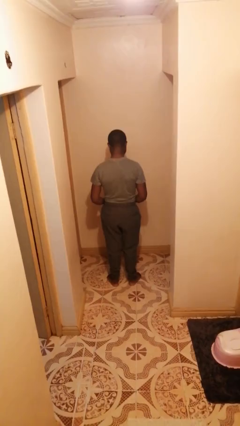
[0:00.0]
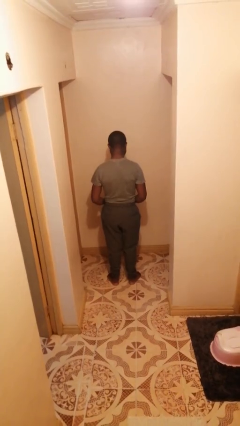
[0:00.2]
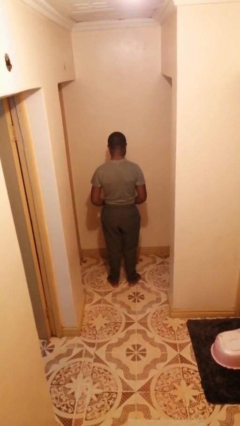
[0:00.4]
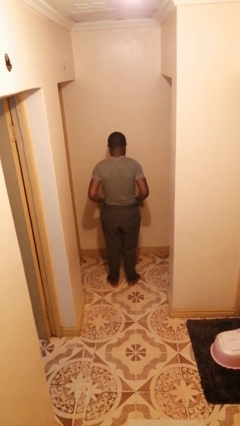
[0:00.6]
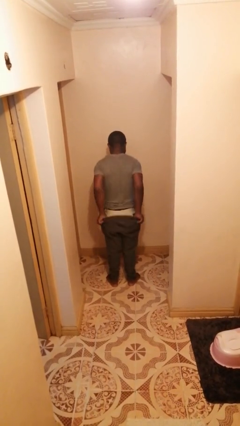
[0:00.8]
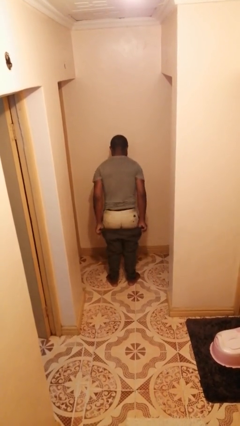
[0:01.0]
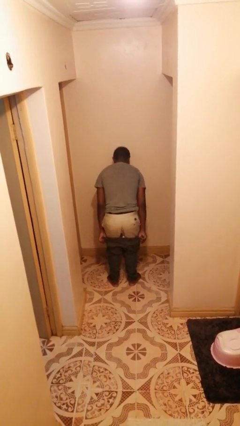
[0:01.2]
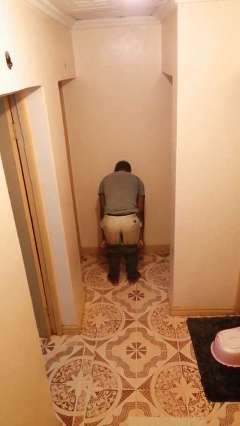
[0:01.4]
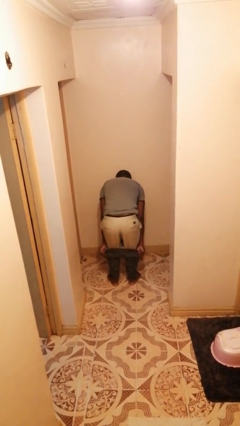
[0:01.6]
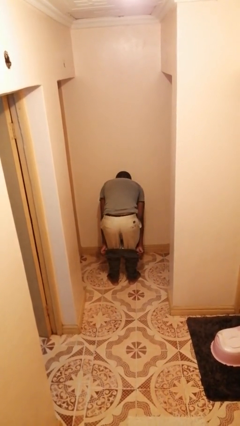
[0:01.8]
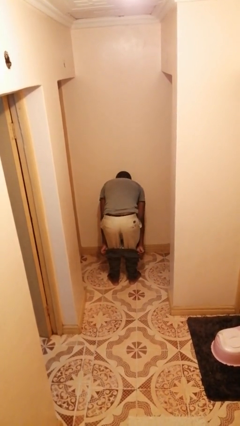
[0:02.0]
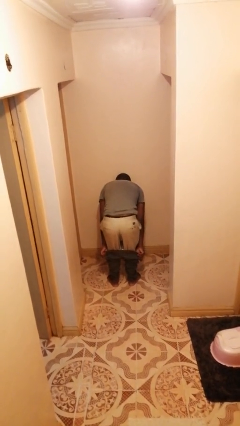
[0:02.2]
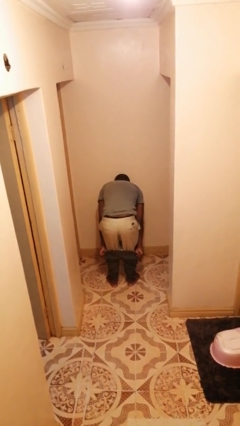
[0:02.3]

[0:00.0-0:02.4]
person takes off pants

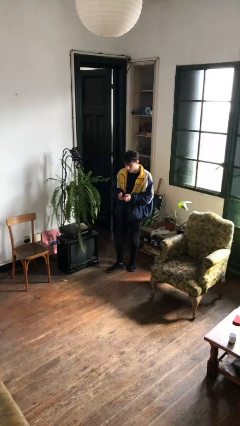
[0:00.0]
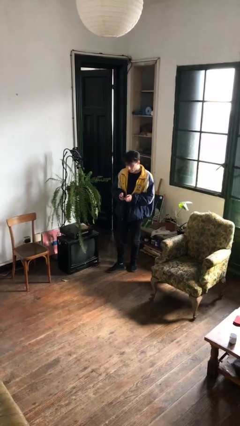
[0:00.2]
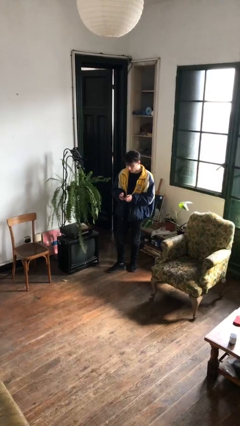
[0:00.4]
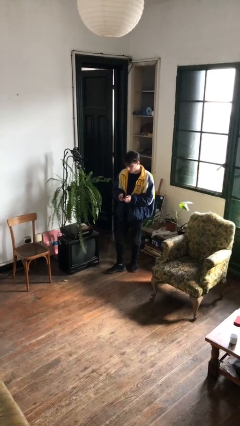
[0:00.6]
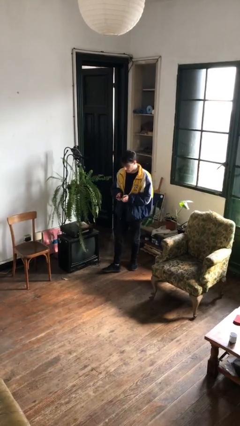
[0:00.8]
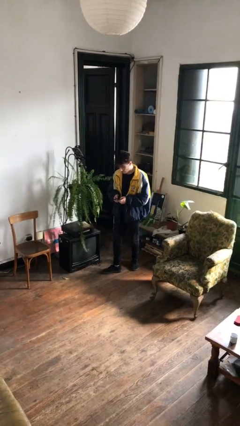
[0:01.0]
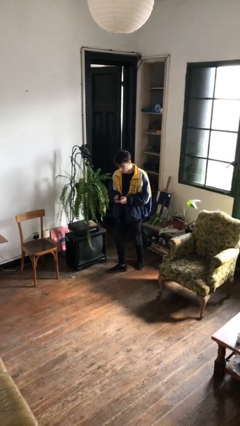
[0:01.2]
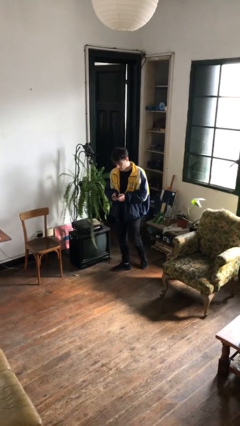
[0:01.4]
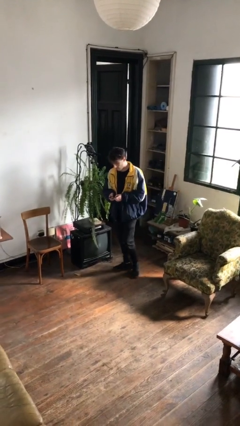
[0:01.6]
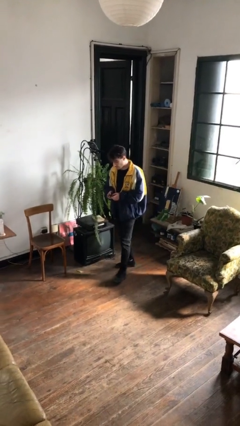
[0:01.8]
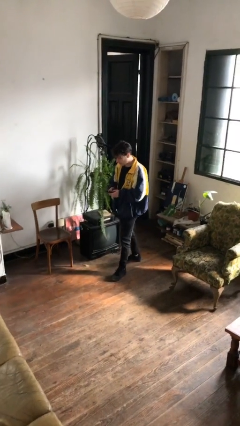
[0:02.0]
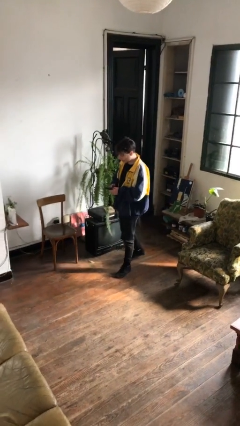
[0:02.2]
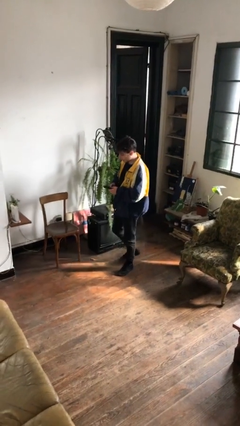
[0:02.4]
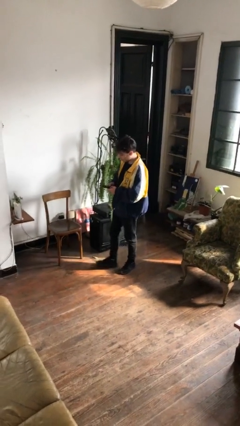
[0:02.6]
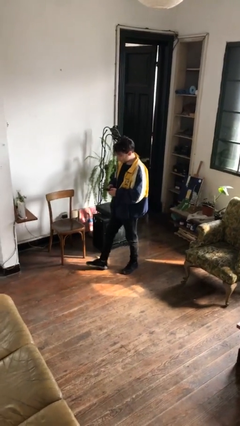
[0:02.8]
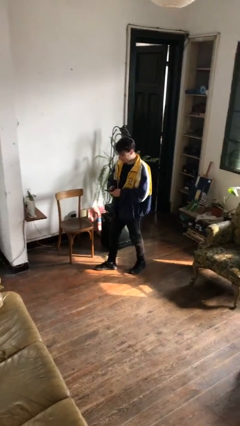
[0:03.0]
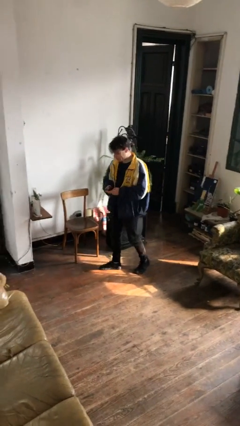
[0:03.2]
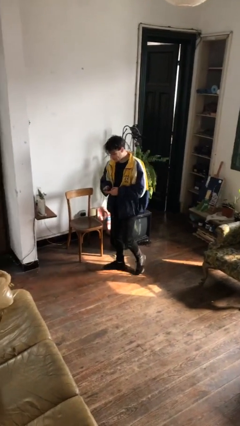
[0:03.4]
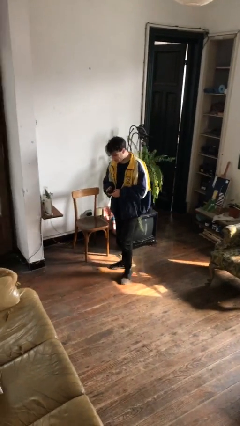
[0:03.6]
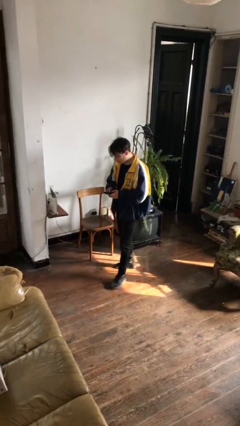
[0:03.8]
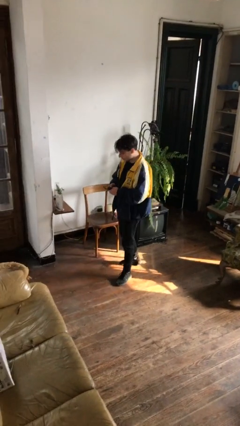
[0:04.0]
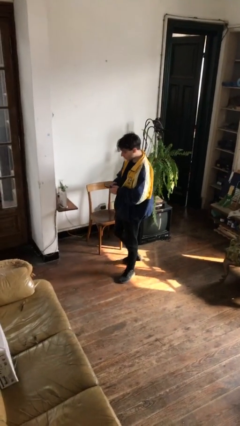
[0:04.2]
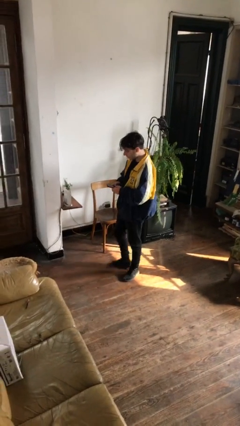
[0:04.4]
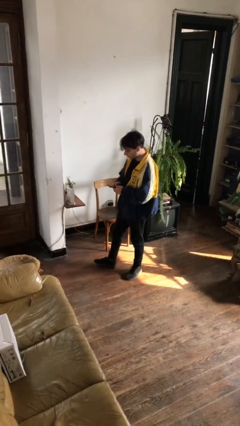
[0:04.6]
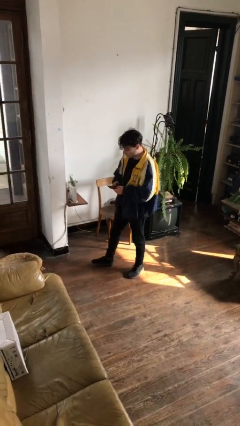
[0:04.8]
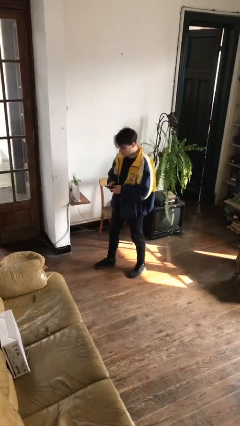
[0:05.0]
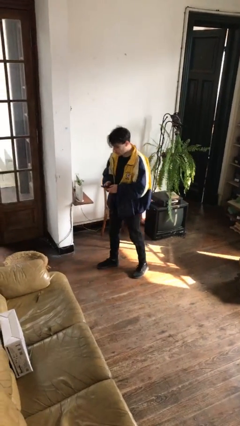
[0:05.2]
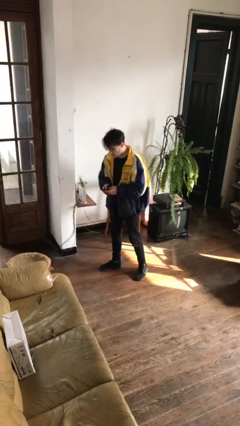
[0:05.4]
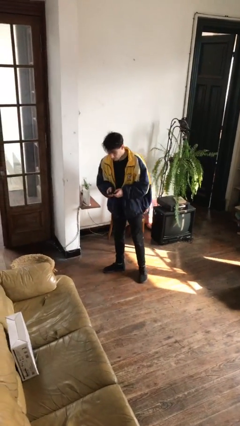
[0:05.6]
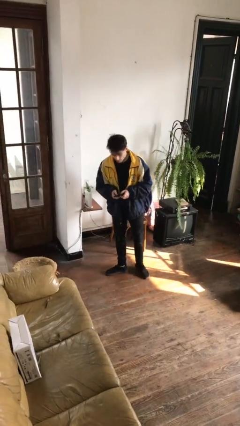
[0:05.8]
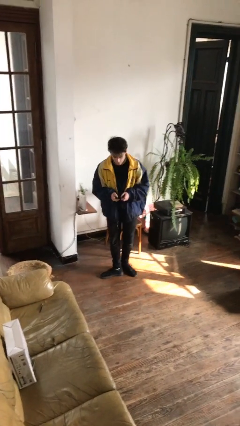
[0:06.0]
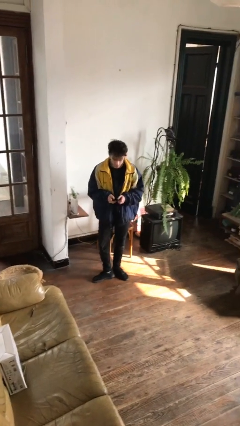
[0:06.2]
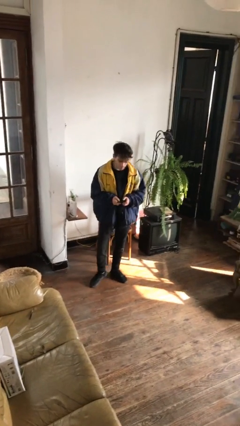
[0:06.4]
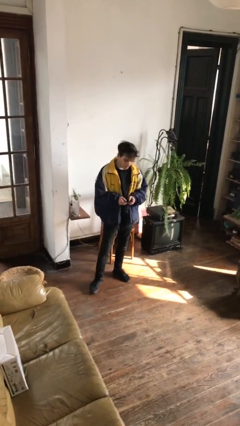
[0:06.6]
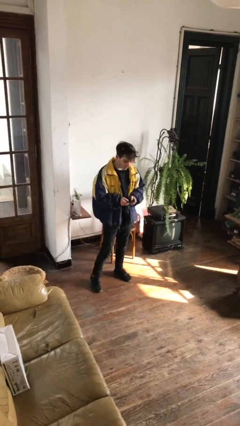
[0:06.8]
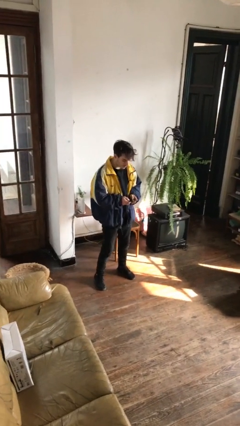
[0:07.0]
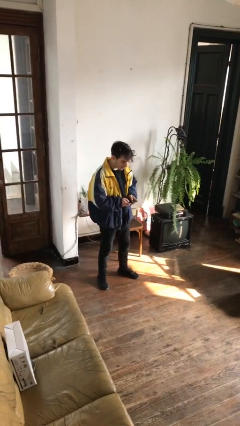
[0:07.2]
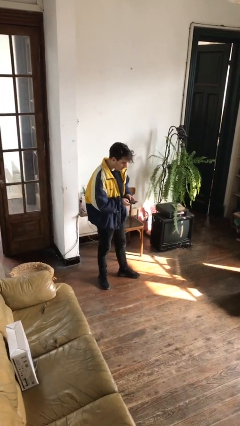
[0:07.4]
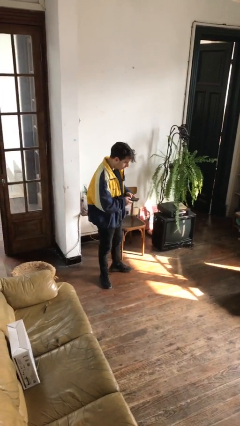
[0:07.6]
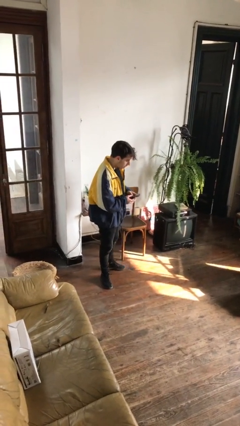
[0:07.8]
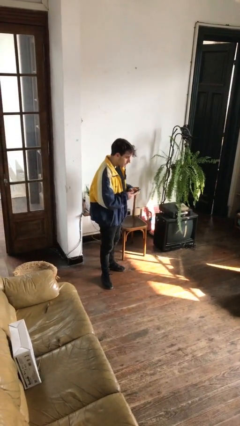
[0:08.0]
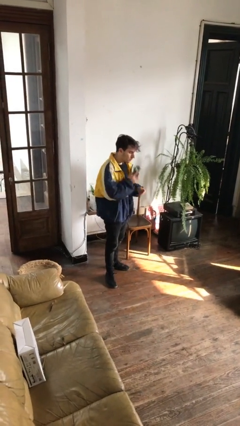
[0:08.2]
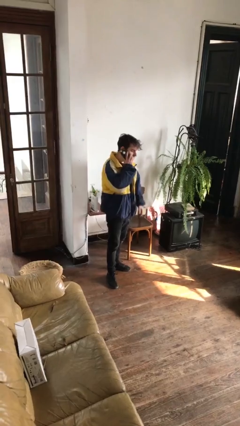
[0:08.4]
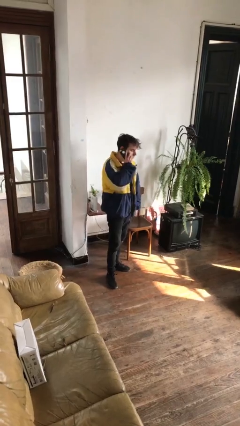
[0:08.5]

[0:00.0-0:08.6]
person texts on phone

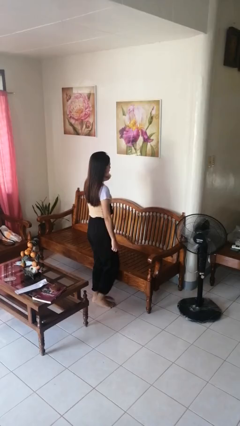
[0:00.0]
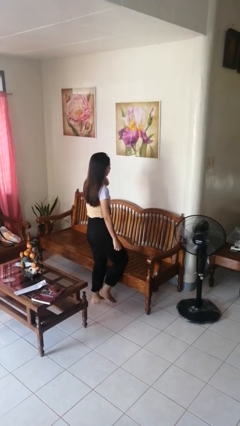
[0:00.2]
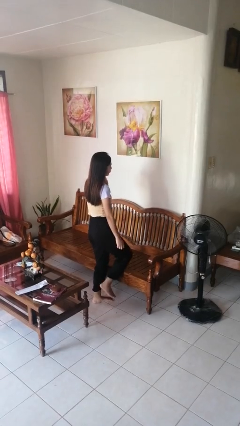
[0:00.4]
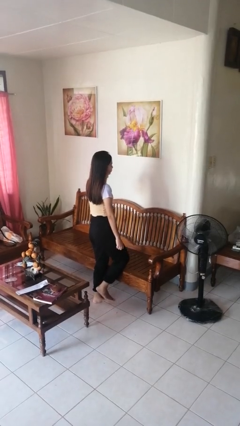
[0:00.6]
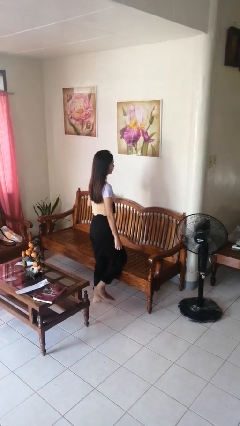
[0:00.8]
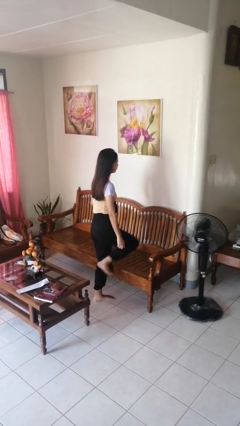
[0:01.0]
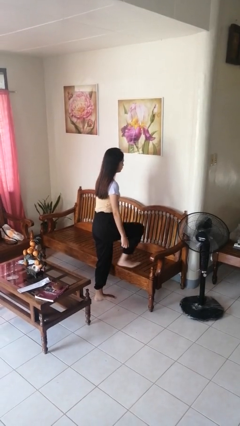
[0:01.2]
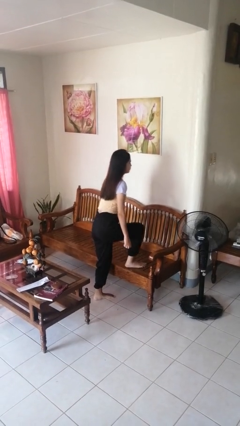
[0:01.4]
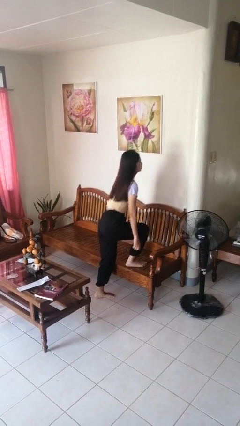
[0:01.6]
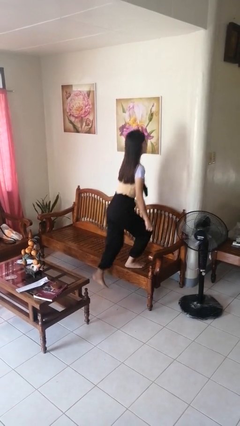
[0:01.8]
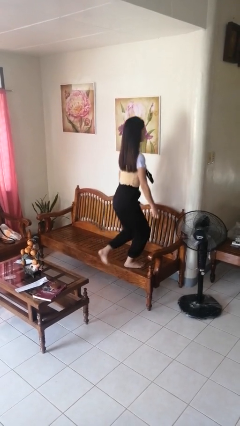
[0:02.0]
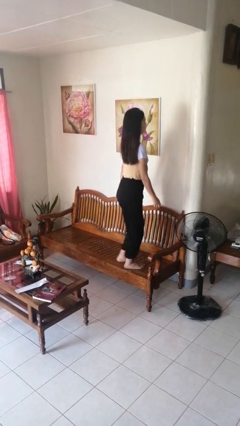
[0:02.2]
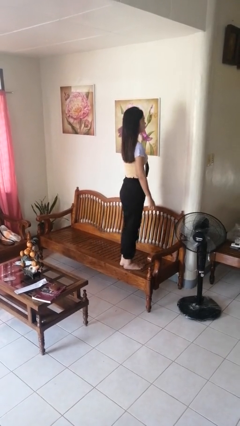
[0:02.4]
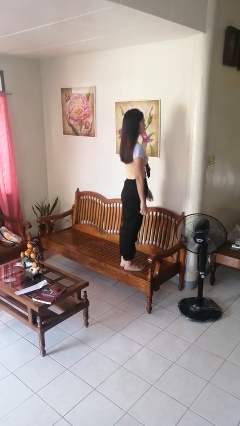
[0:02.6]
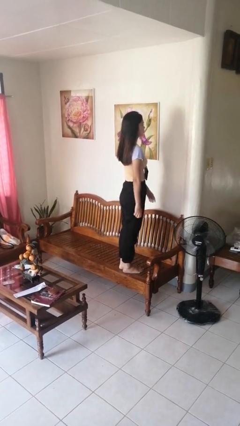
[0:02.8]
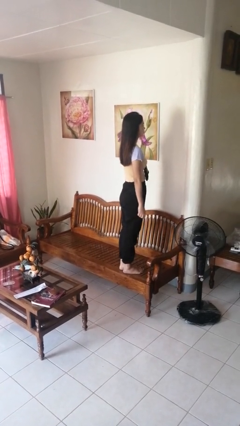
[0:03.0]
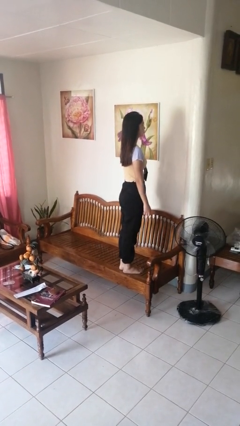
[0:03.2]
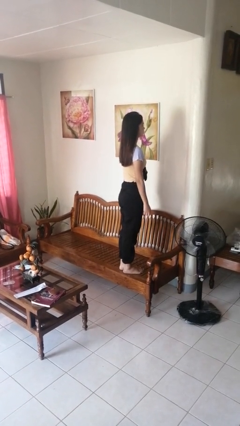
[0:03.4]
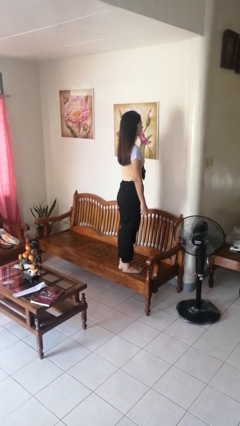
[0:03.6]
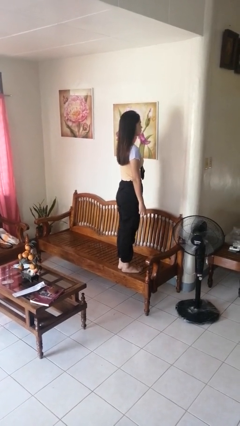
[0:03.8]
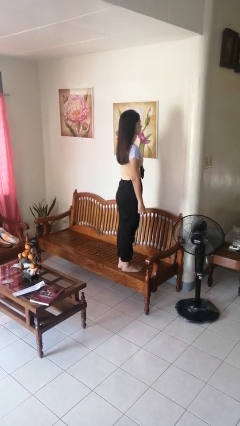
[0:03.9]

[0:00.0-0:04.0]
person climbs on chair

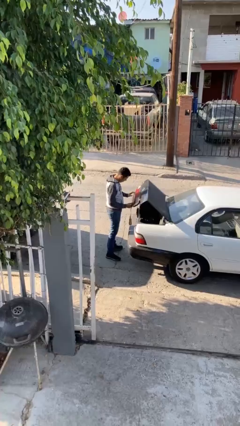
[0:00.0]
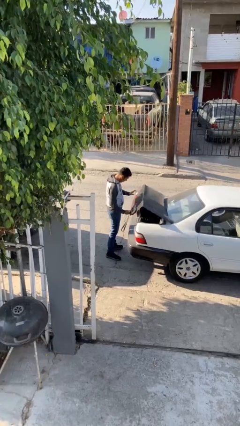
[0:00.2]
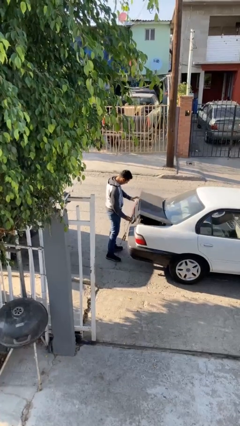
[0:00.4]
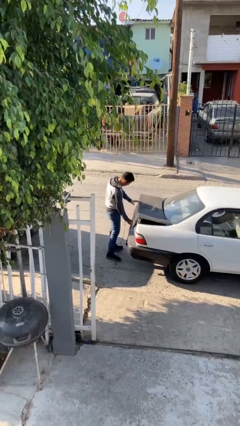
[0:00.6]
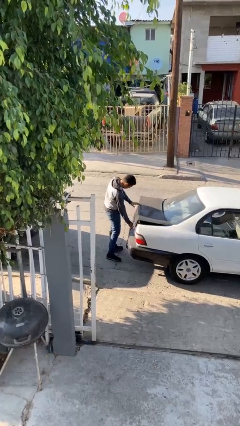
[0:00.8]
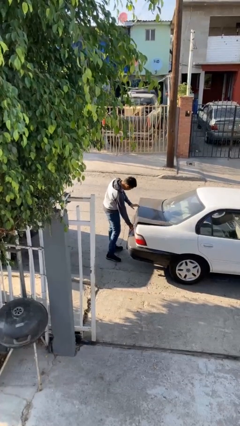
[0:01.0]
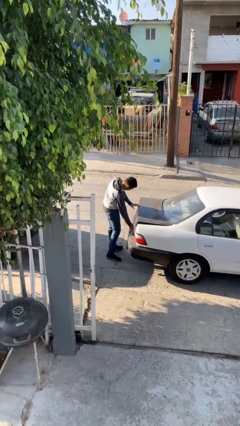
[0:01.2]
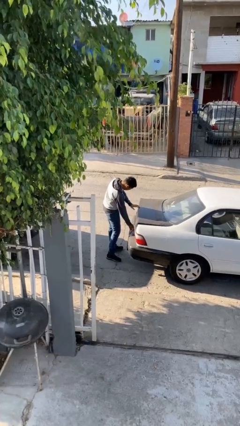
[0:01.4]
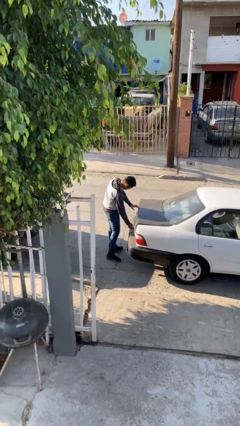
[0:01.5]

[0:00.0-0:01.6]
person closes car trunk

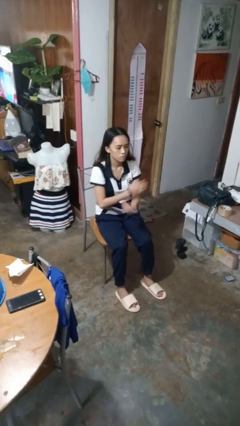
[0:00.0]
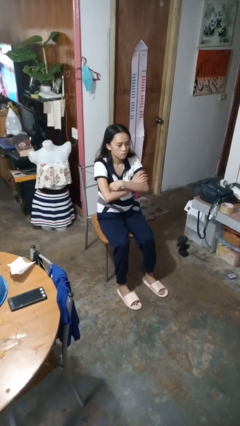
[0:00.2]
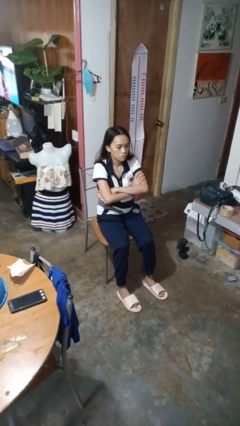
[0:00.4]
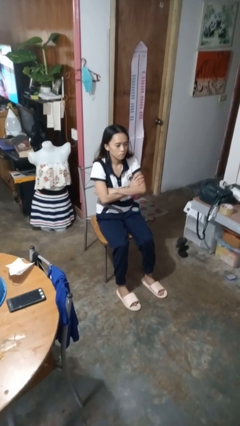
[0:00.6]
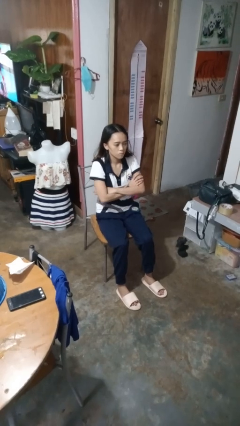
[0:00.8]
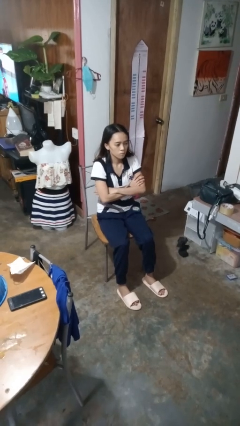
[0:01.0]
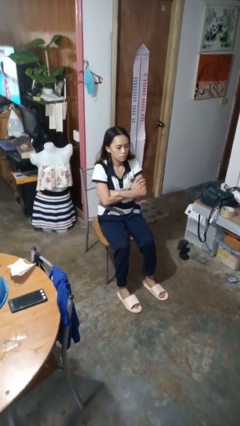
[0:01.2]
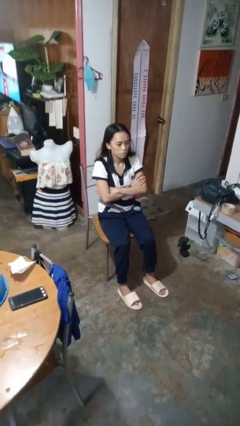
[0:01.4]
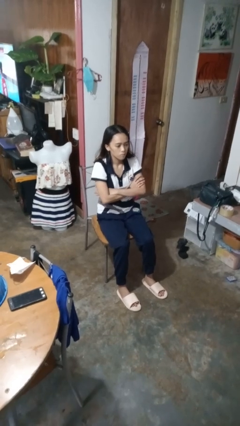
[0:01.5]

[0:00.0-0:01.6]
person crosses arms
